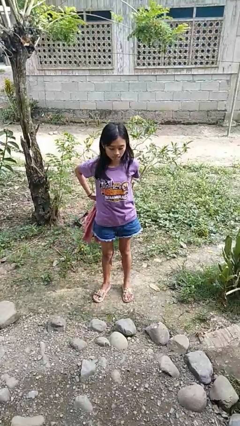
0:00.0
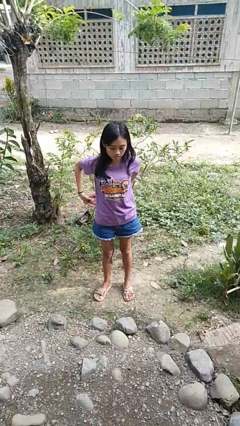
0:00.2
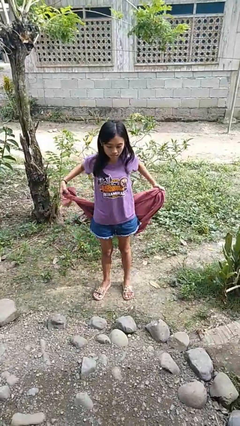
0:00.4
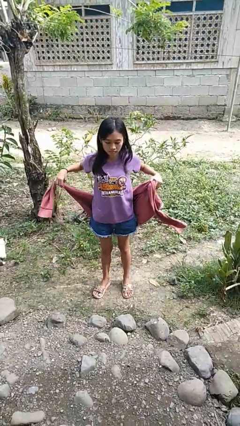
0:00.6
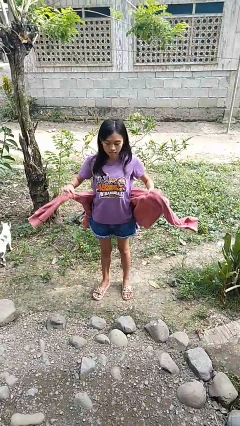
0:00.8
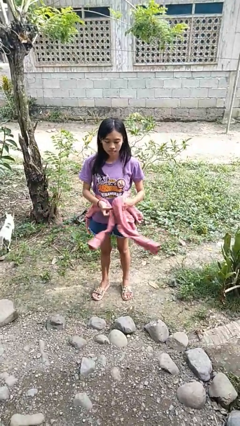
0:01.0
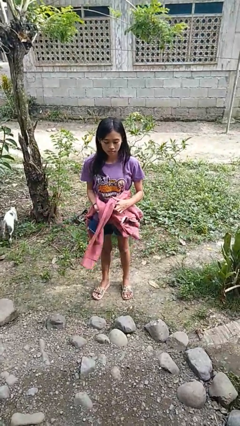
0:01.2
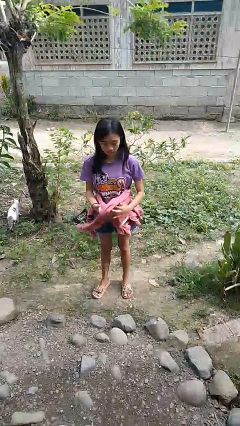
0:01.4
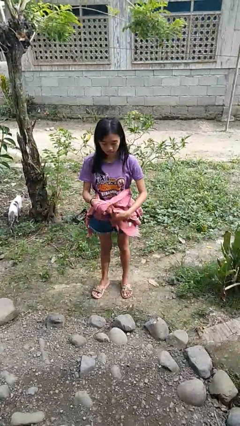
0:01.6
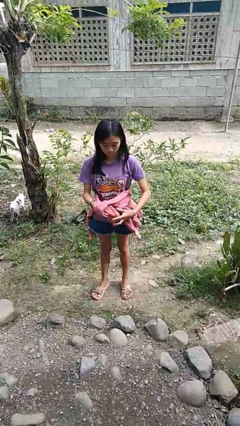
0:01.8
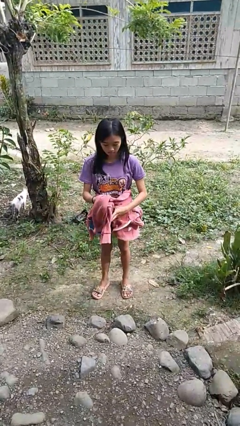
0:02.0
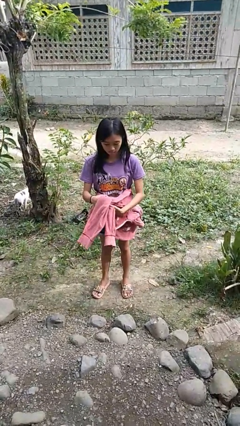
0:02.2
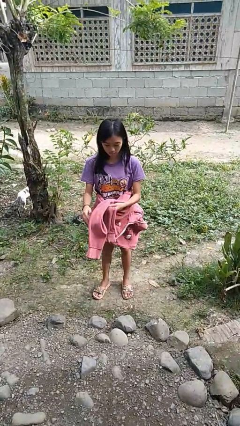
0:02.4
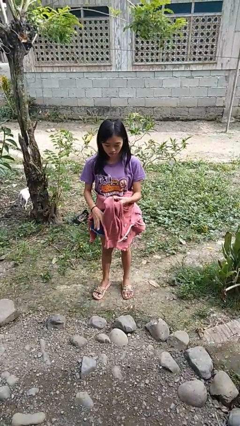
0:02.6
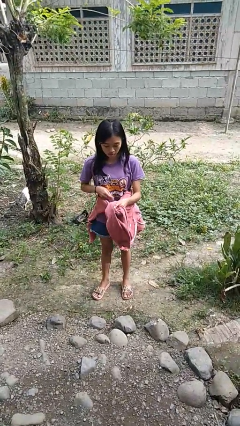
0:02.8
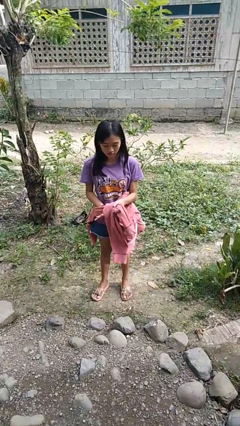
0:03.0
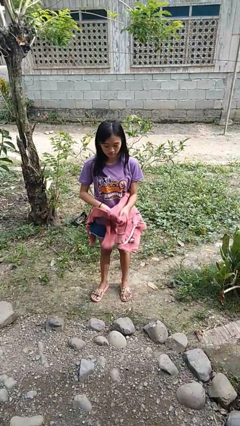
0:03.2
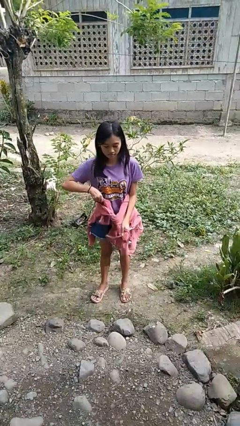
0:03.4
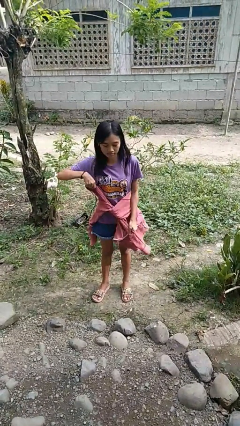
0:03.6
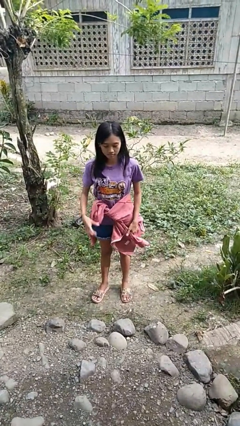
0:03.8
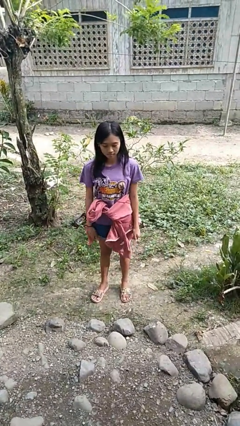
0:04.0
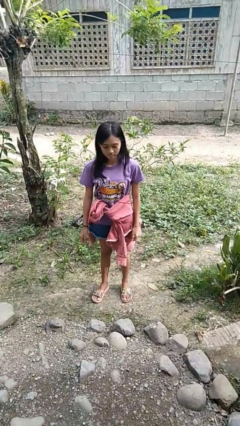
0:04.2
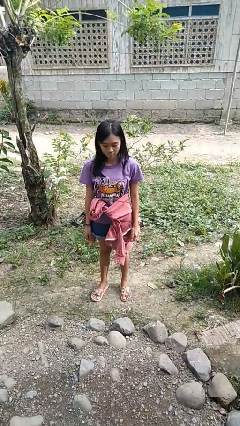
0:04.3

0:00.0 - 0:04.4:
person ties jacket around waist

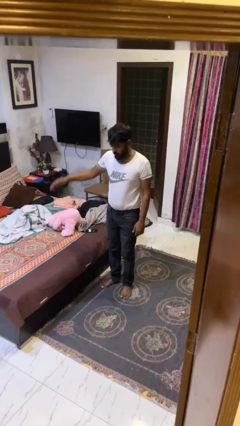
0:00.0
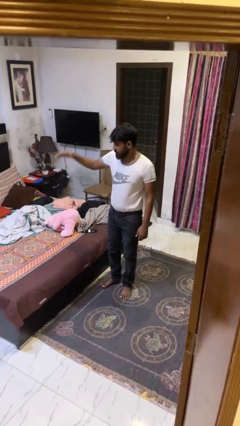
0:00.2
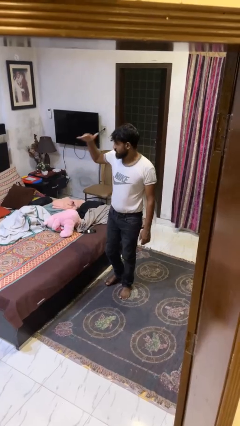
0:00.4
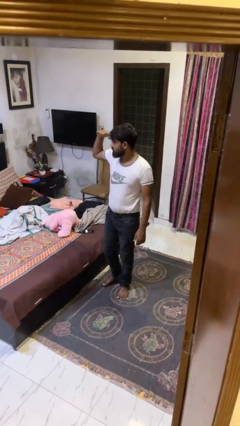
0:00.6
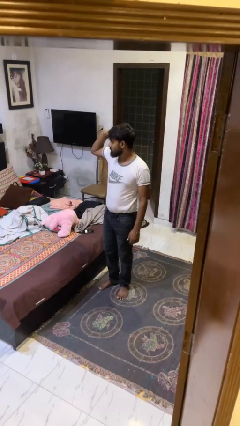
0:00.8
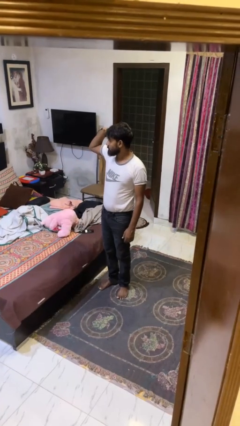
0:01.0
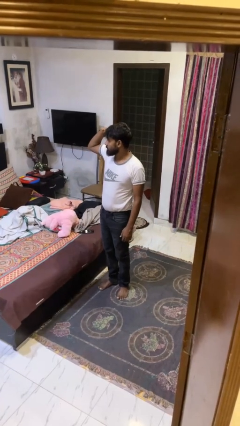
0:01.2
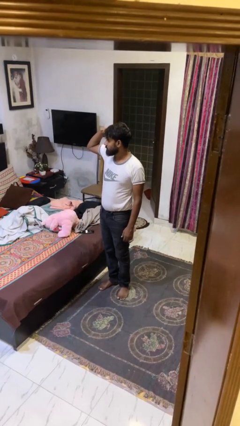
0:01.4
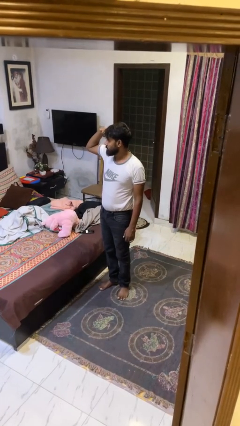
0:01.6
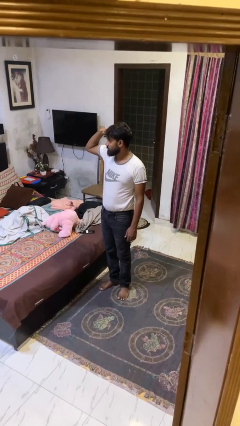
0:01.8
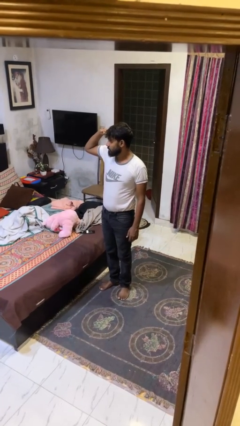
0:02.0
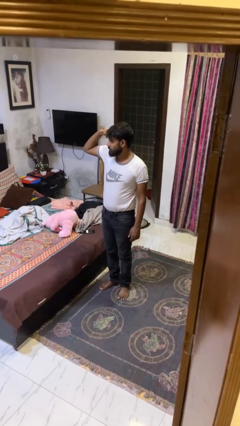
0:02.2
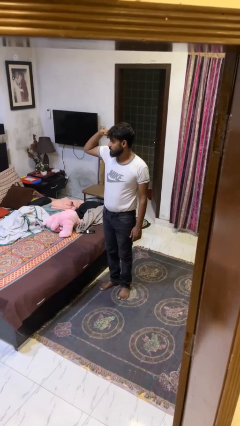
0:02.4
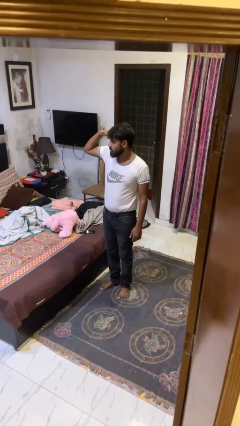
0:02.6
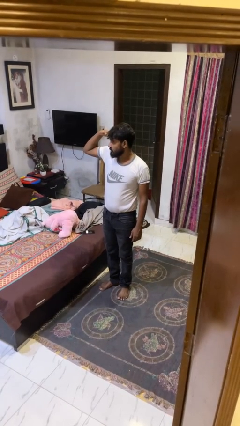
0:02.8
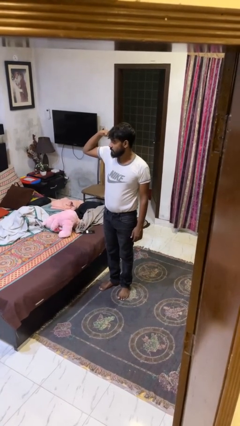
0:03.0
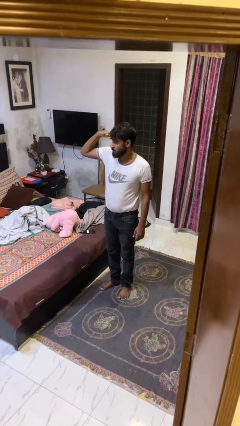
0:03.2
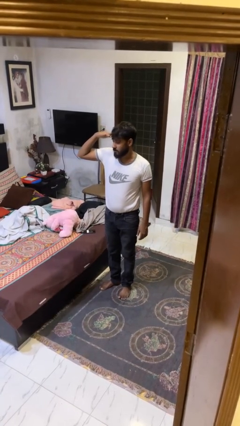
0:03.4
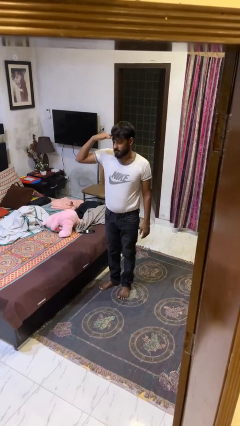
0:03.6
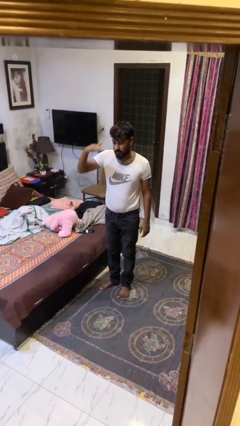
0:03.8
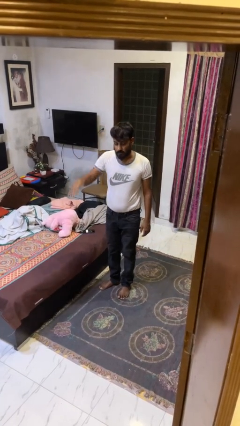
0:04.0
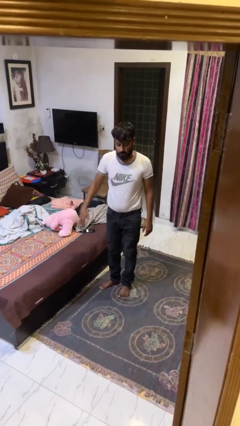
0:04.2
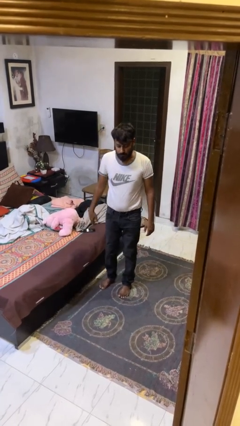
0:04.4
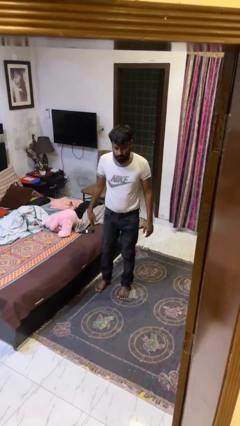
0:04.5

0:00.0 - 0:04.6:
person salutes

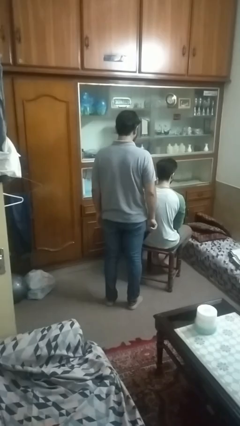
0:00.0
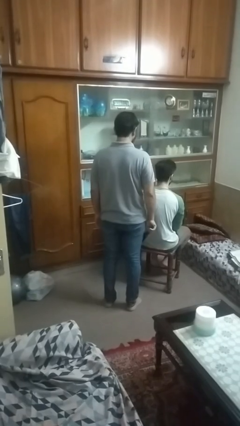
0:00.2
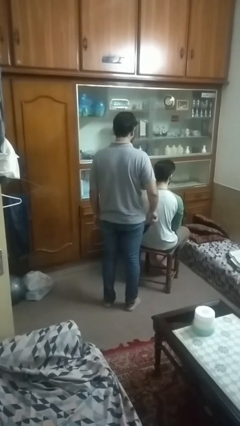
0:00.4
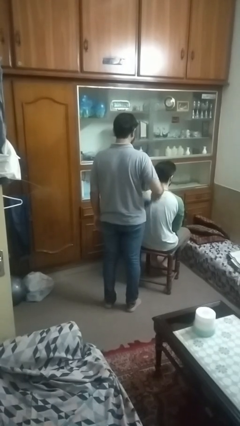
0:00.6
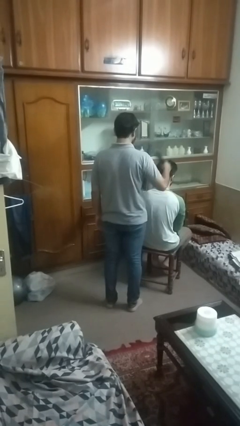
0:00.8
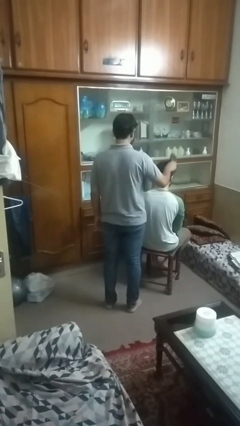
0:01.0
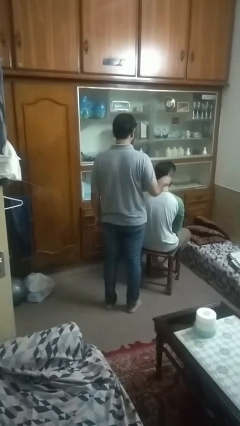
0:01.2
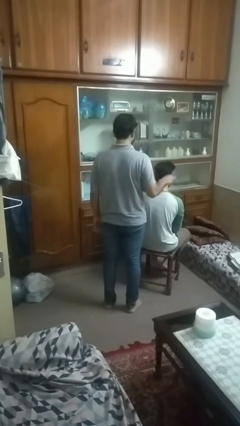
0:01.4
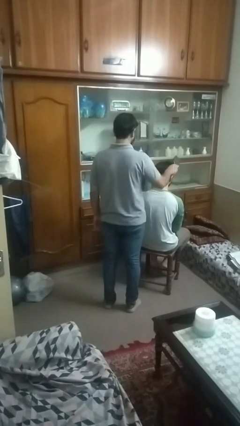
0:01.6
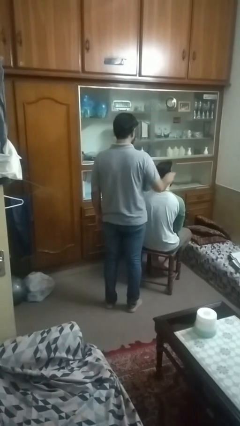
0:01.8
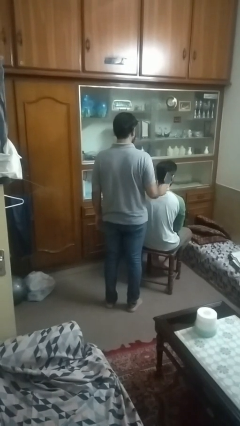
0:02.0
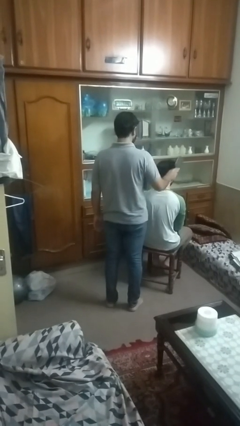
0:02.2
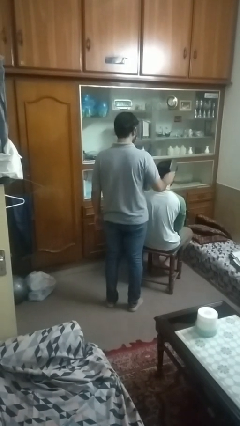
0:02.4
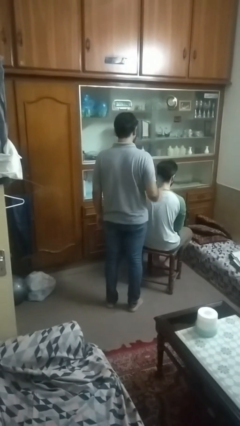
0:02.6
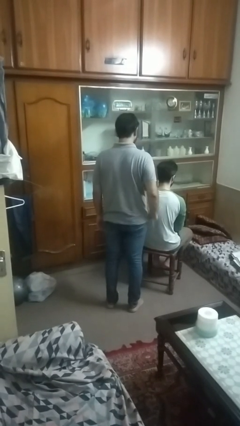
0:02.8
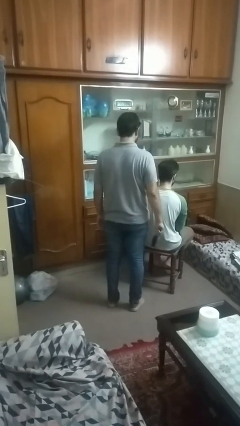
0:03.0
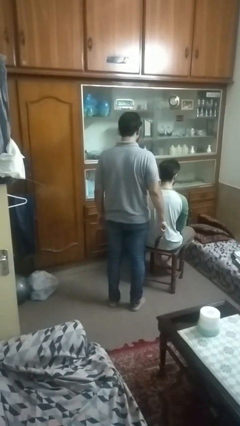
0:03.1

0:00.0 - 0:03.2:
person brushes hair of person

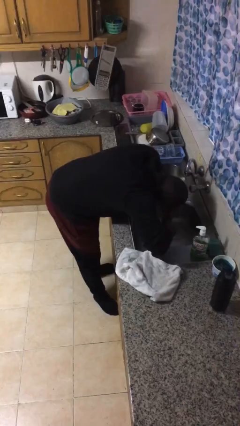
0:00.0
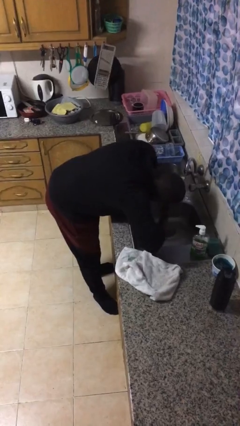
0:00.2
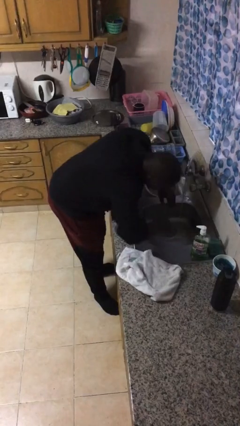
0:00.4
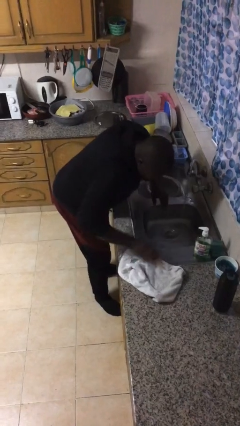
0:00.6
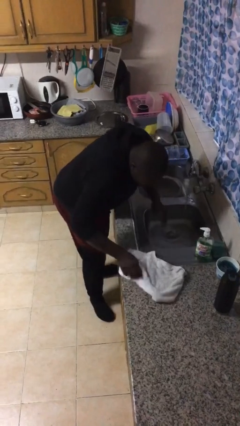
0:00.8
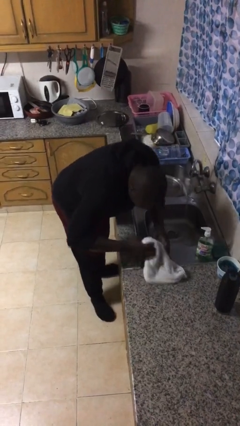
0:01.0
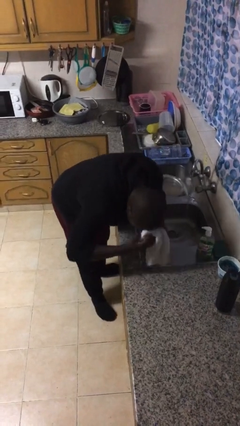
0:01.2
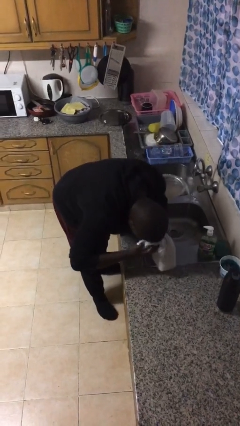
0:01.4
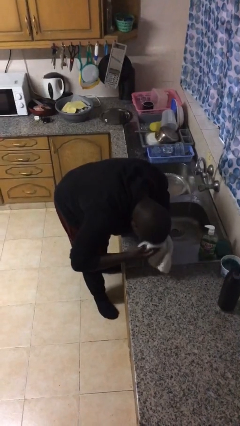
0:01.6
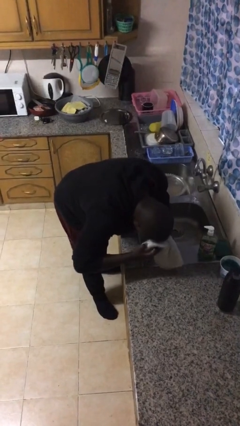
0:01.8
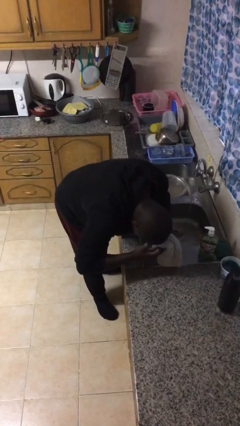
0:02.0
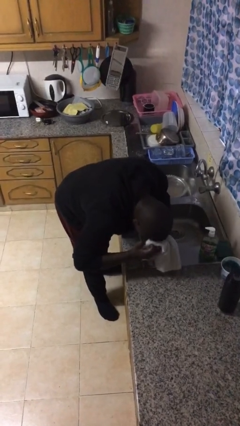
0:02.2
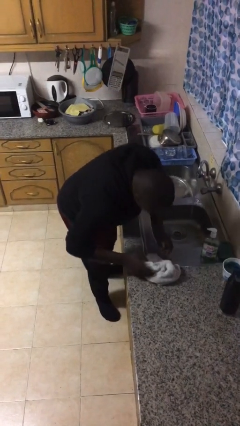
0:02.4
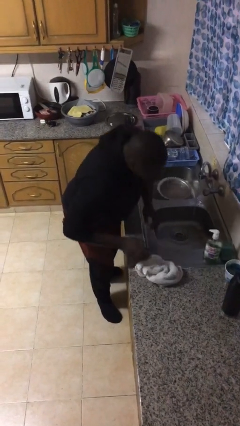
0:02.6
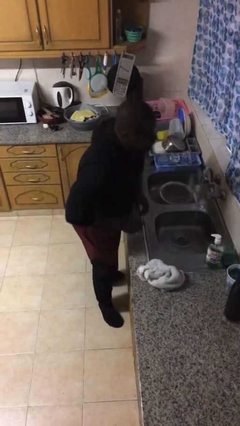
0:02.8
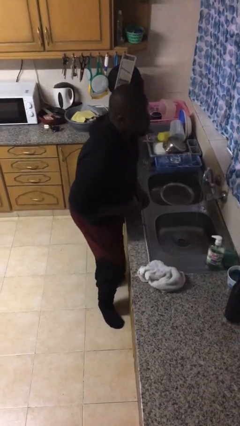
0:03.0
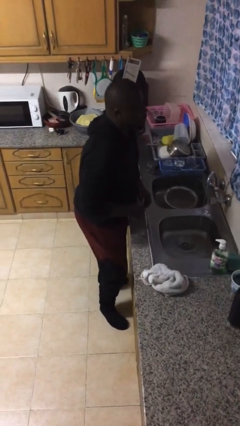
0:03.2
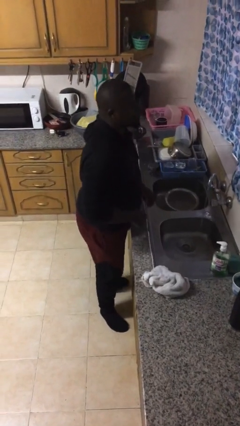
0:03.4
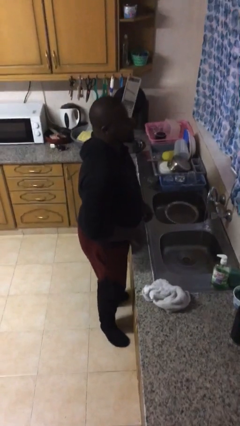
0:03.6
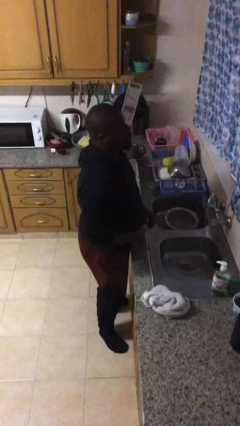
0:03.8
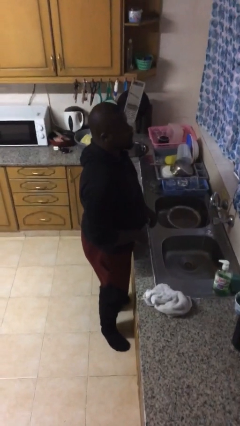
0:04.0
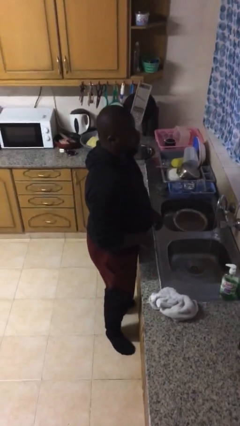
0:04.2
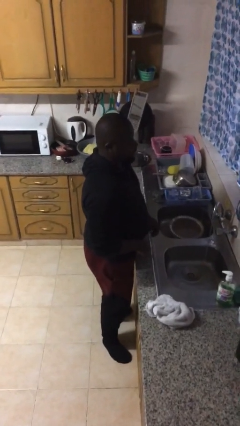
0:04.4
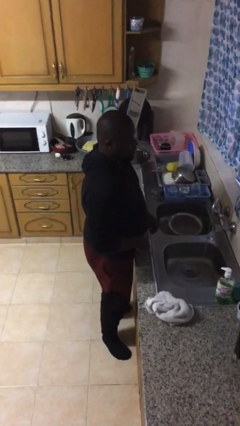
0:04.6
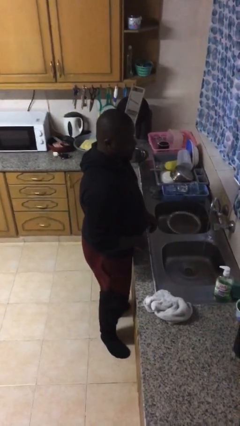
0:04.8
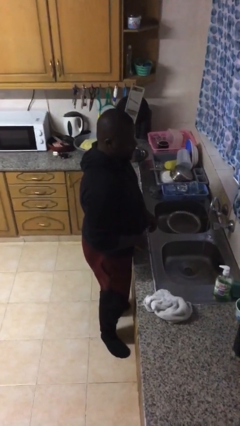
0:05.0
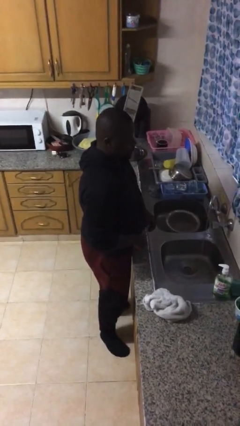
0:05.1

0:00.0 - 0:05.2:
person dries face with towel

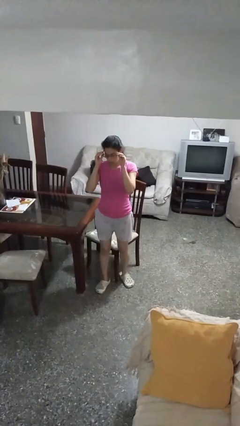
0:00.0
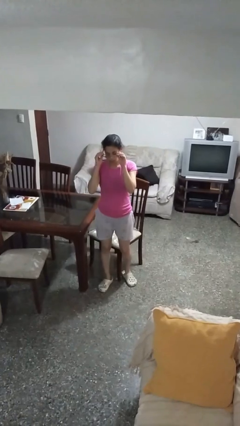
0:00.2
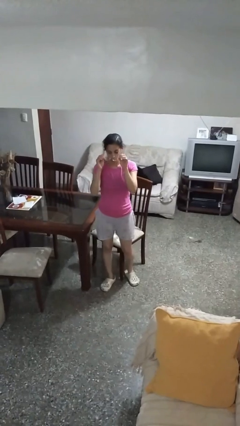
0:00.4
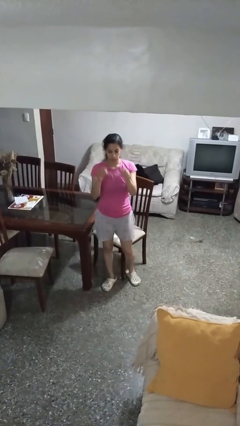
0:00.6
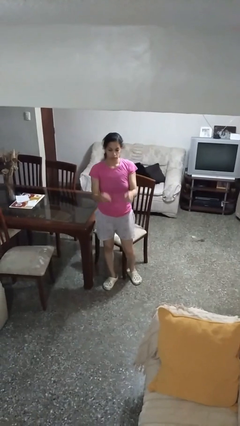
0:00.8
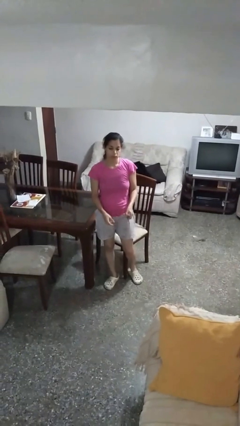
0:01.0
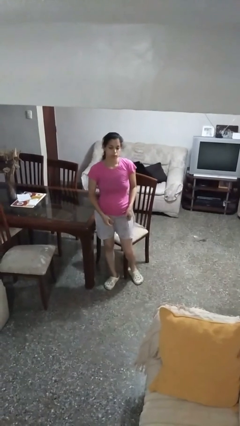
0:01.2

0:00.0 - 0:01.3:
person takes off glasses
